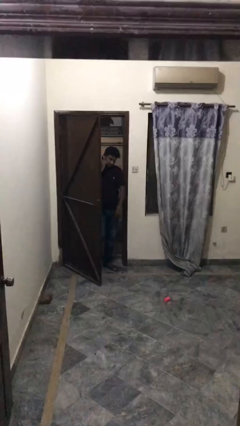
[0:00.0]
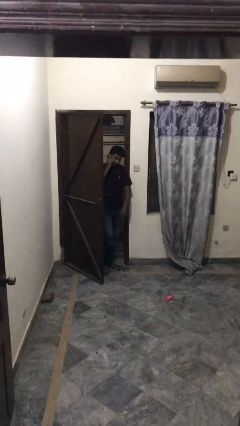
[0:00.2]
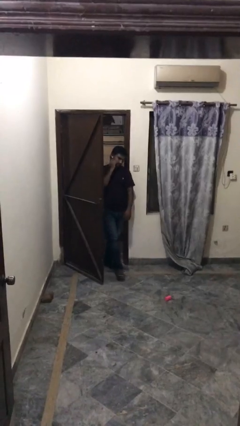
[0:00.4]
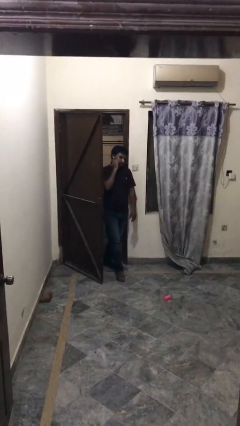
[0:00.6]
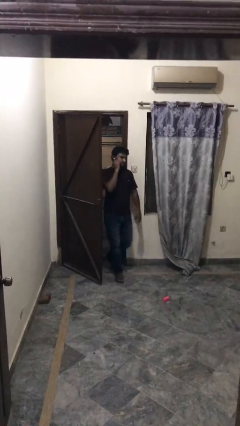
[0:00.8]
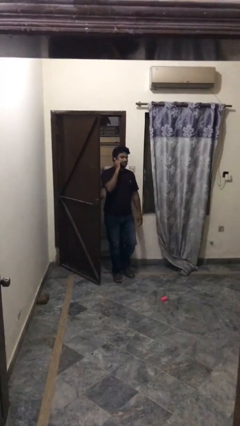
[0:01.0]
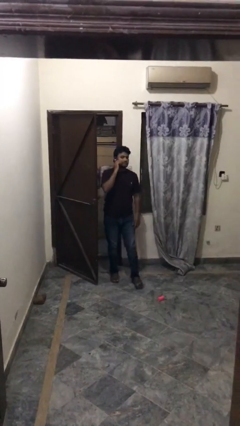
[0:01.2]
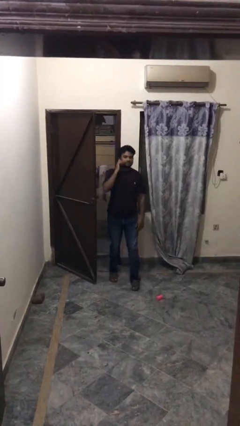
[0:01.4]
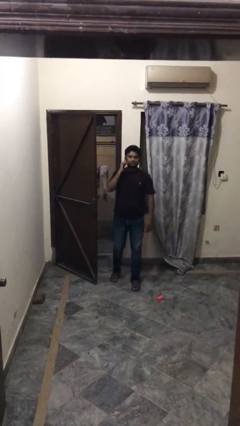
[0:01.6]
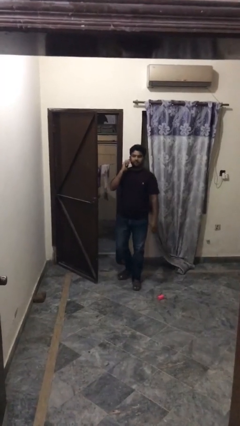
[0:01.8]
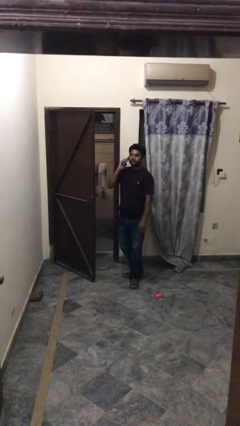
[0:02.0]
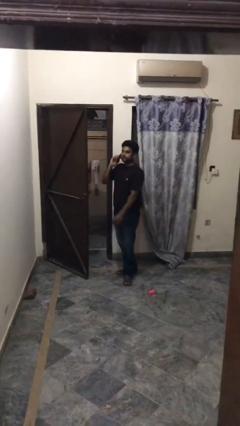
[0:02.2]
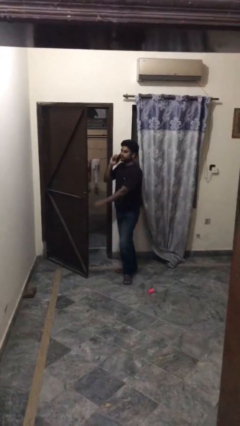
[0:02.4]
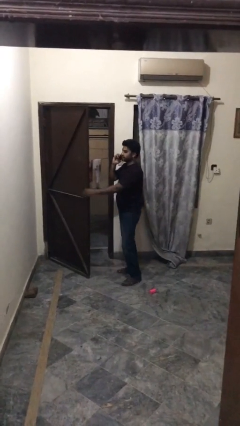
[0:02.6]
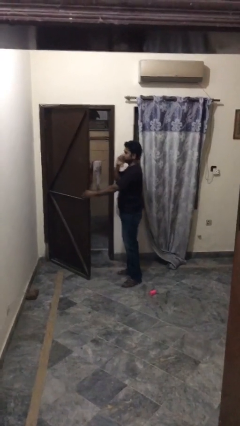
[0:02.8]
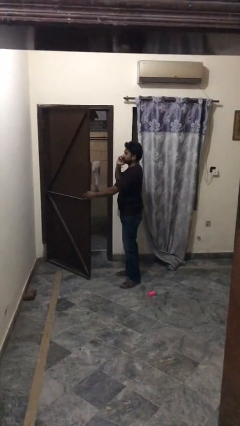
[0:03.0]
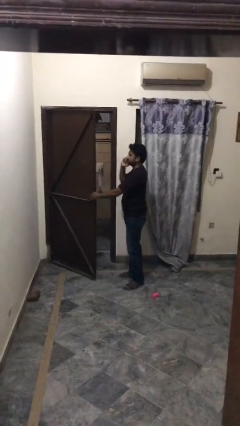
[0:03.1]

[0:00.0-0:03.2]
person enters scene through structure

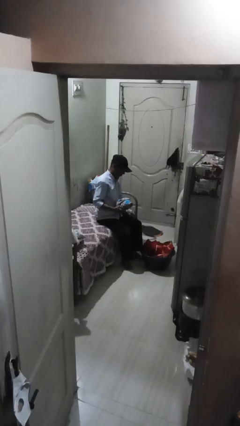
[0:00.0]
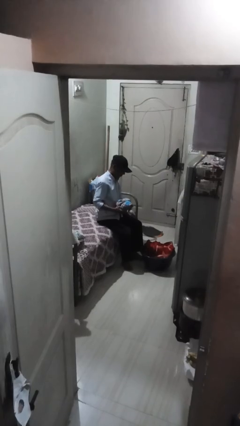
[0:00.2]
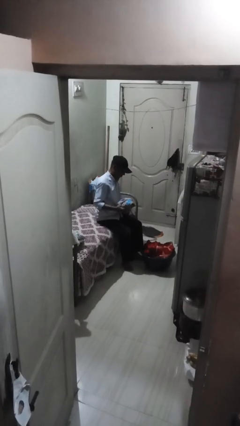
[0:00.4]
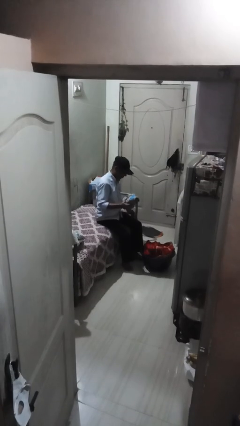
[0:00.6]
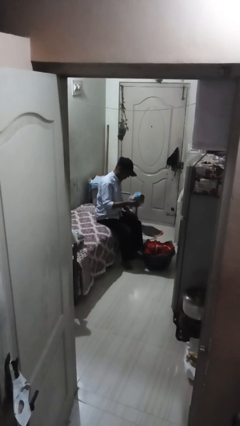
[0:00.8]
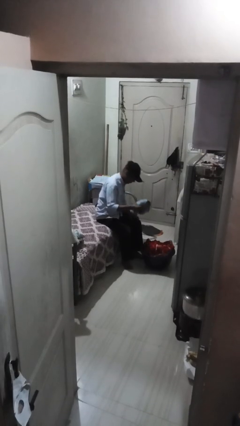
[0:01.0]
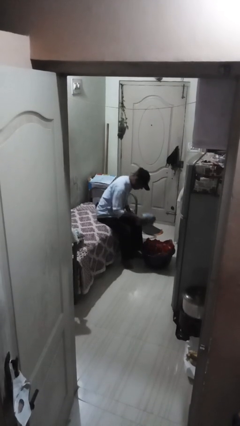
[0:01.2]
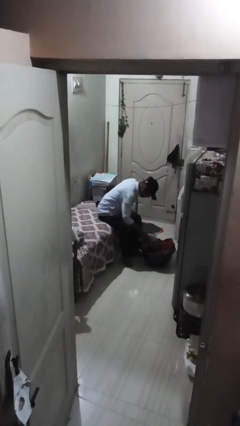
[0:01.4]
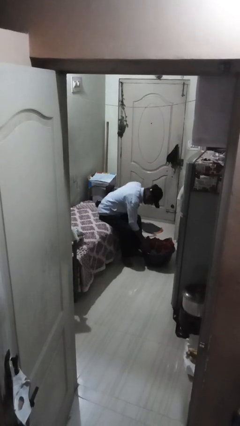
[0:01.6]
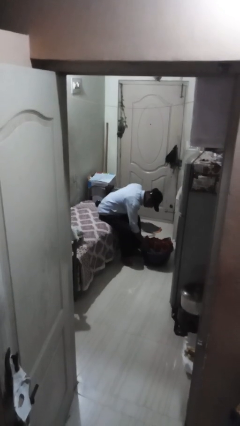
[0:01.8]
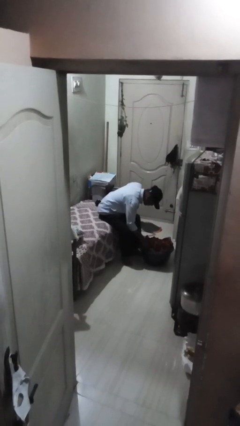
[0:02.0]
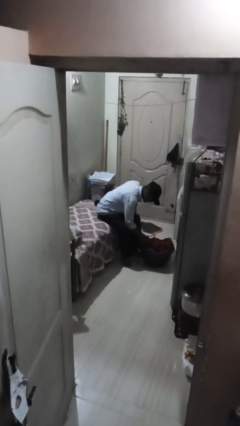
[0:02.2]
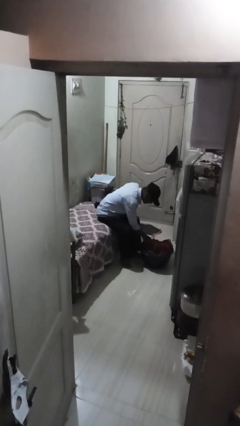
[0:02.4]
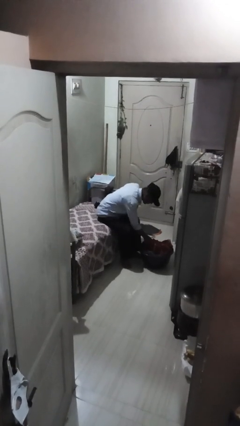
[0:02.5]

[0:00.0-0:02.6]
person puts object into basket

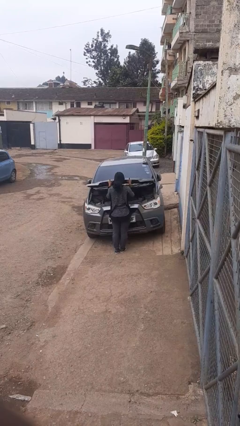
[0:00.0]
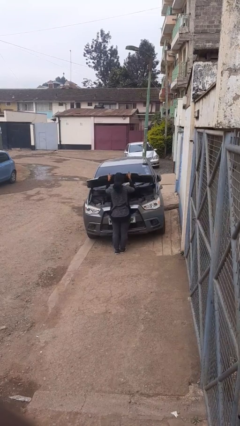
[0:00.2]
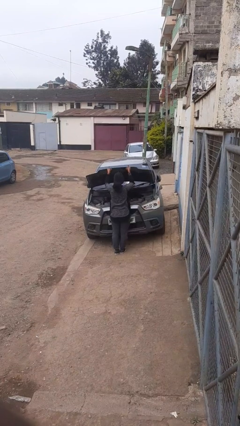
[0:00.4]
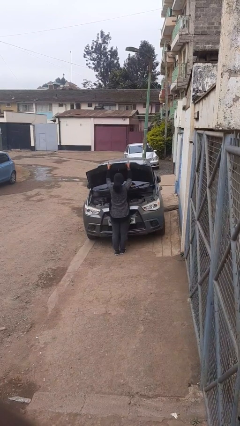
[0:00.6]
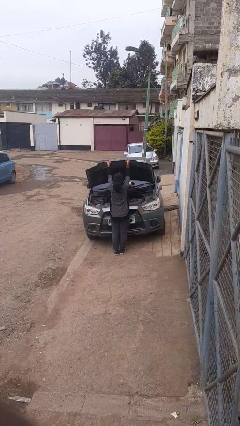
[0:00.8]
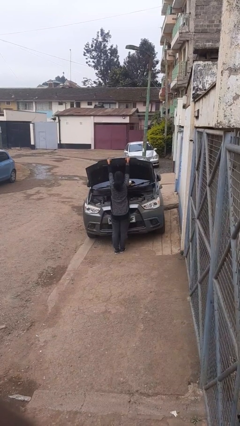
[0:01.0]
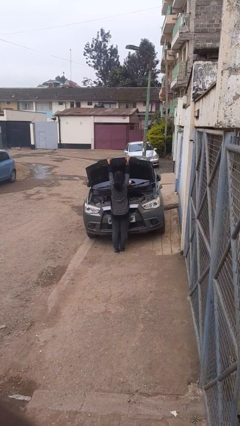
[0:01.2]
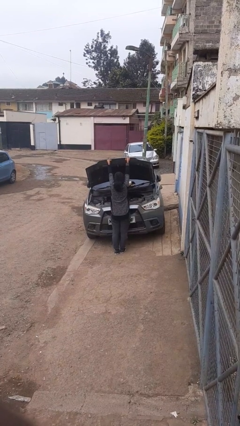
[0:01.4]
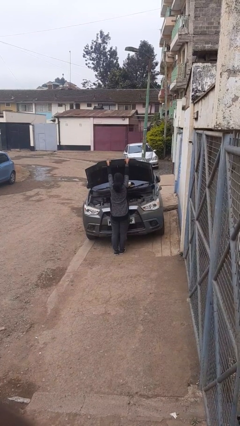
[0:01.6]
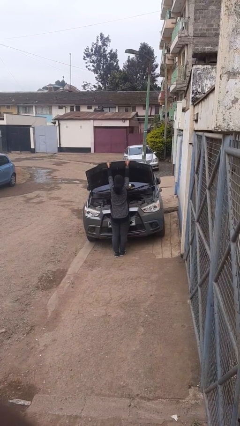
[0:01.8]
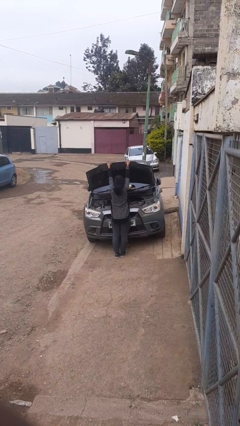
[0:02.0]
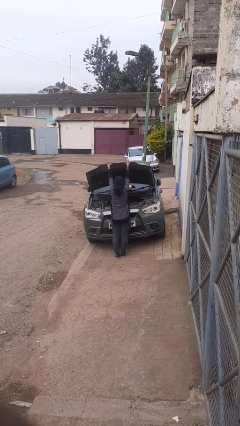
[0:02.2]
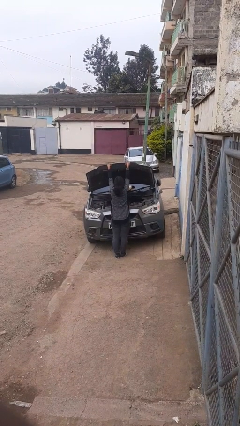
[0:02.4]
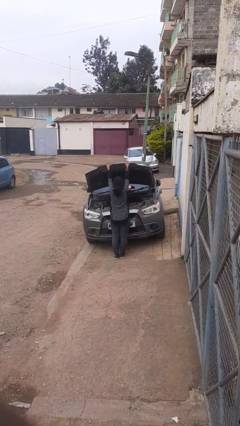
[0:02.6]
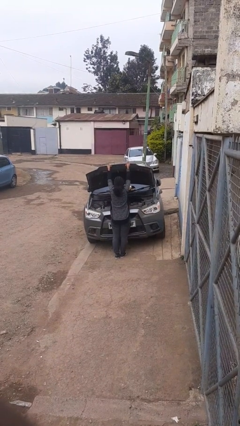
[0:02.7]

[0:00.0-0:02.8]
person opens car hood

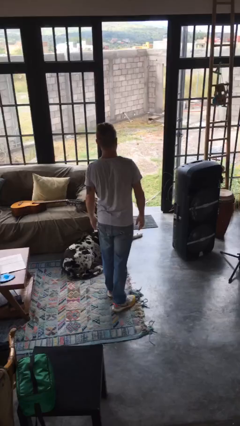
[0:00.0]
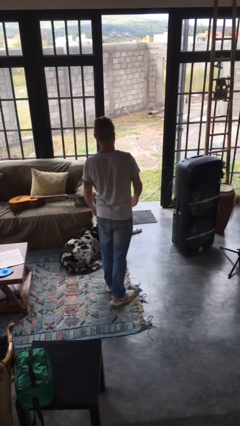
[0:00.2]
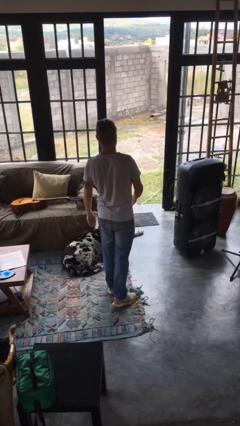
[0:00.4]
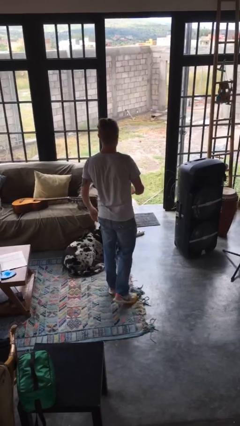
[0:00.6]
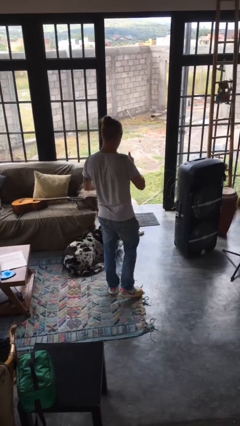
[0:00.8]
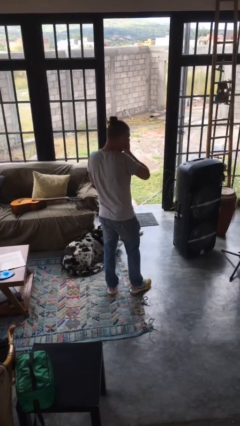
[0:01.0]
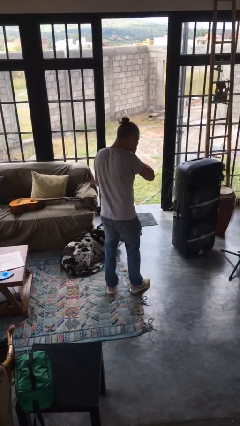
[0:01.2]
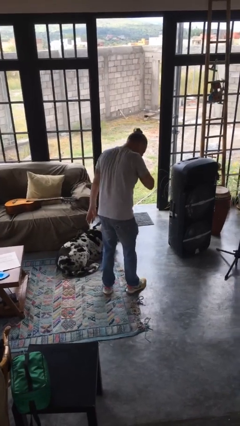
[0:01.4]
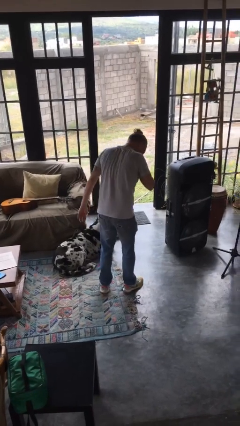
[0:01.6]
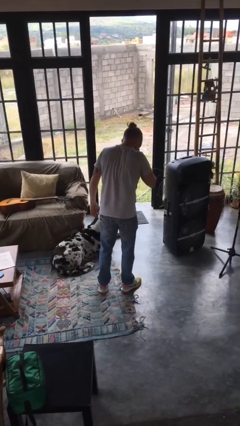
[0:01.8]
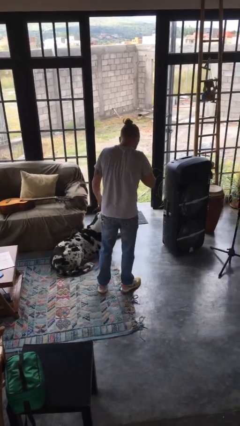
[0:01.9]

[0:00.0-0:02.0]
person sneezes into hand

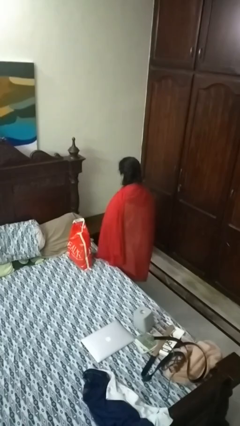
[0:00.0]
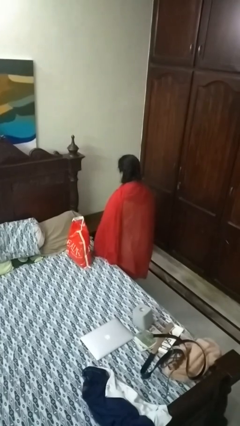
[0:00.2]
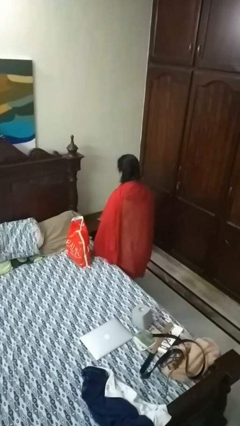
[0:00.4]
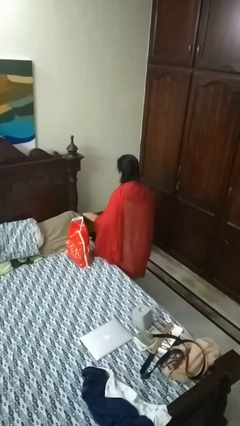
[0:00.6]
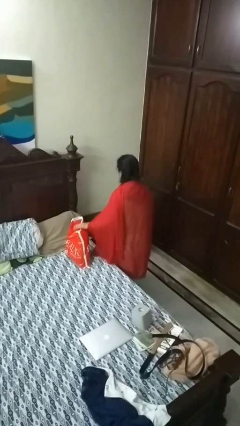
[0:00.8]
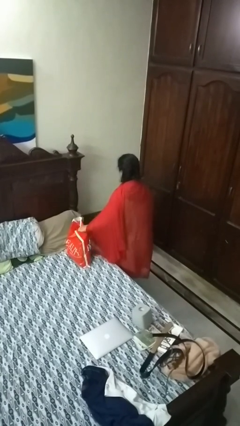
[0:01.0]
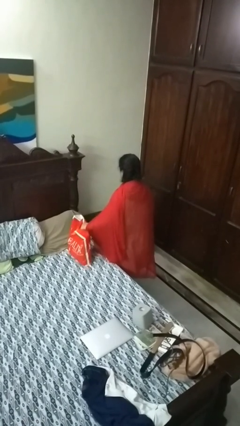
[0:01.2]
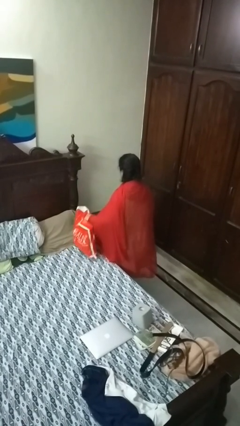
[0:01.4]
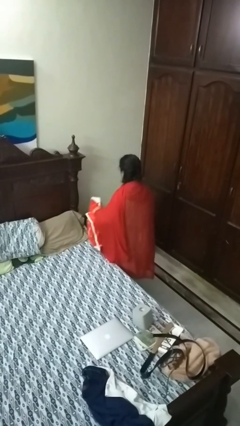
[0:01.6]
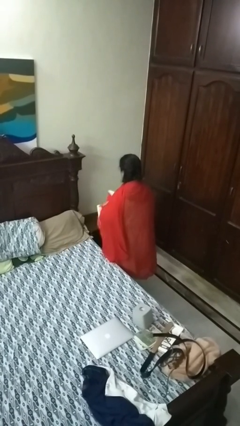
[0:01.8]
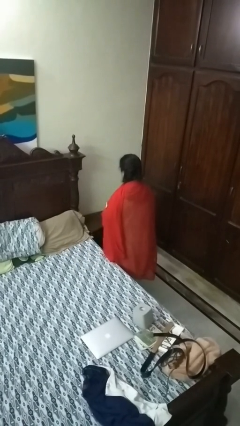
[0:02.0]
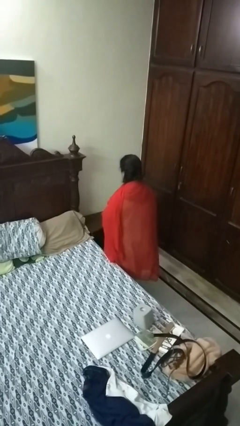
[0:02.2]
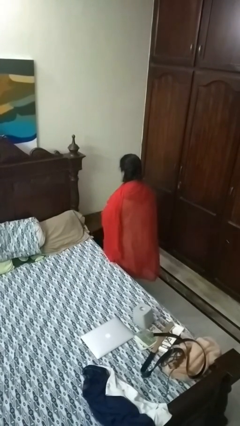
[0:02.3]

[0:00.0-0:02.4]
person picks up object from bed

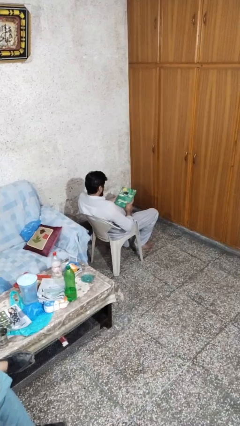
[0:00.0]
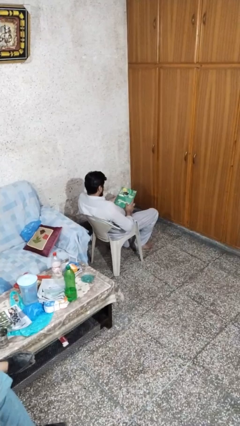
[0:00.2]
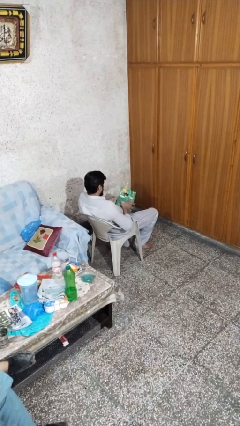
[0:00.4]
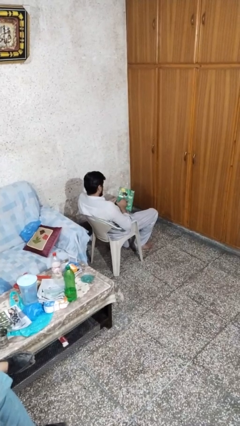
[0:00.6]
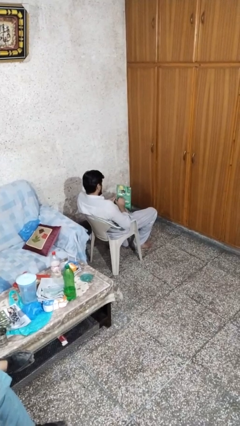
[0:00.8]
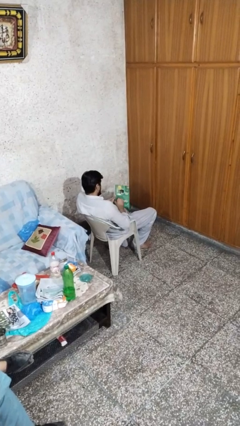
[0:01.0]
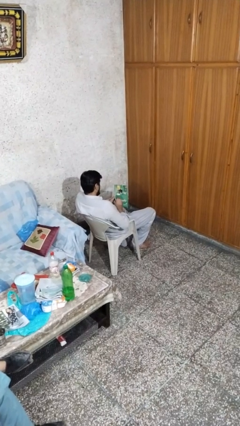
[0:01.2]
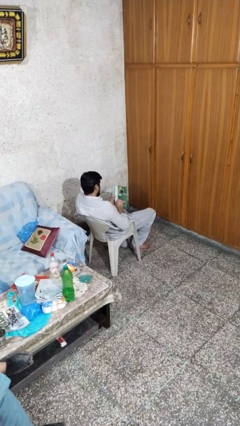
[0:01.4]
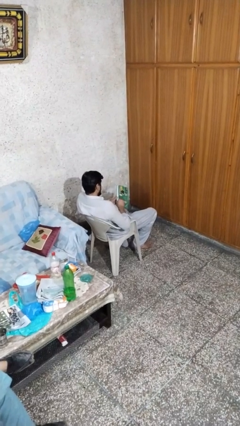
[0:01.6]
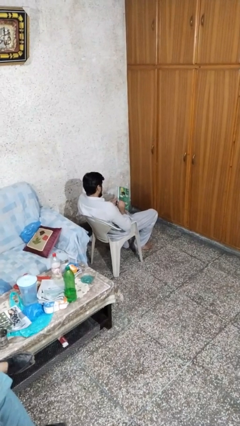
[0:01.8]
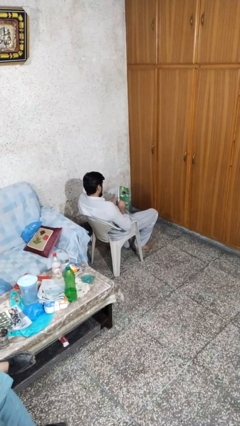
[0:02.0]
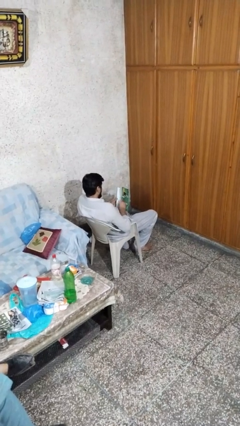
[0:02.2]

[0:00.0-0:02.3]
person reads book

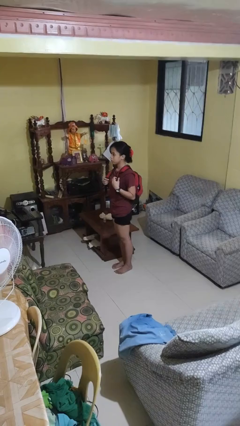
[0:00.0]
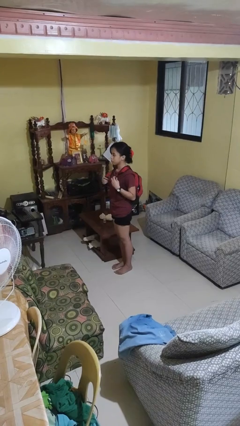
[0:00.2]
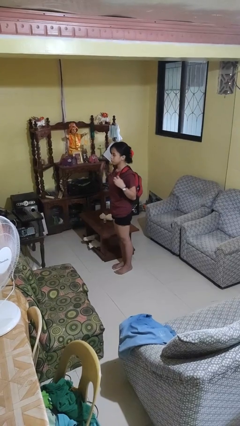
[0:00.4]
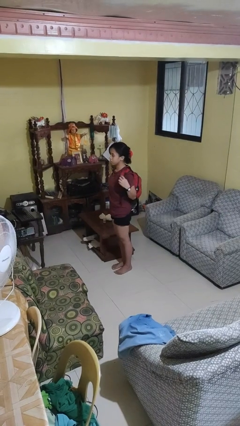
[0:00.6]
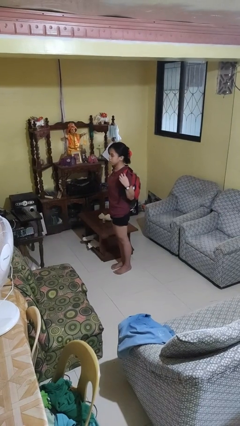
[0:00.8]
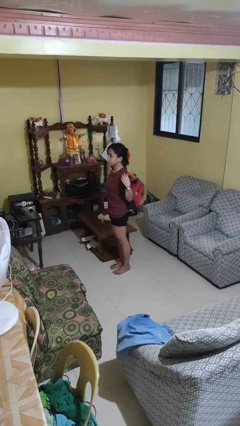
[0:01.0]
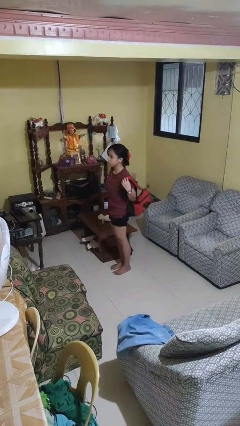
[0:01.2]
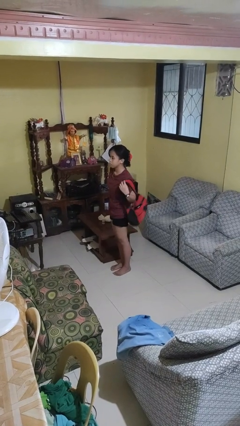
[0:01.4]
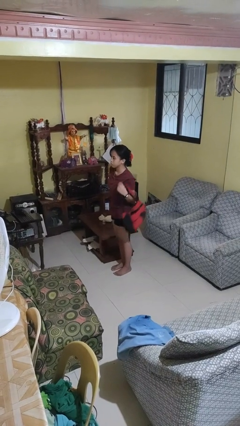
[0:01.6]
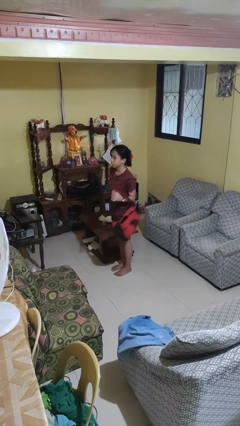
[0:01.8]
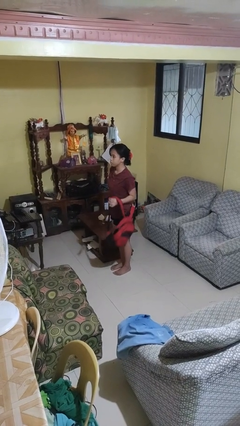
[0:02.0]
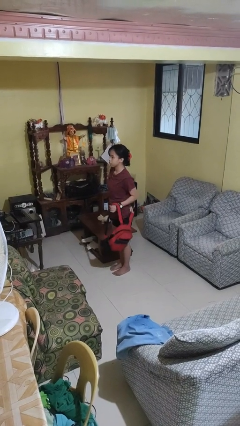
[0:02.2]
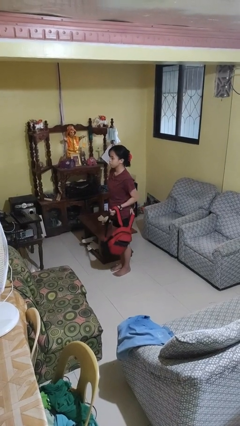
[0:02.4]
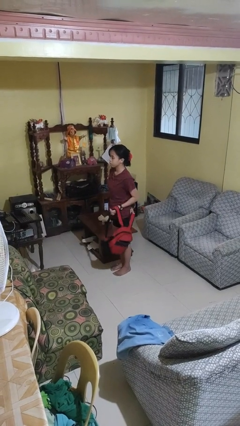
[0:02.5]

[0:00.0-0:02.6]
person takes off backpack
